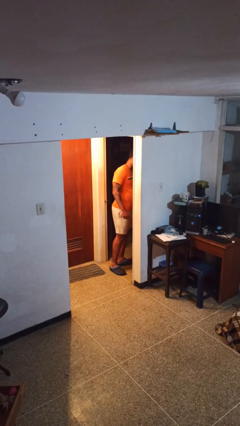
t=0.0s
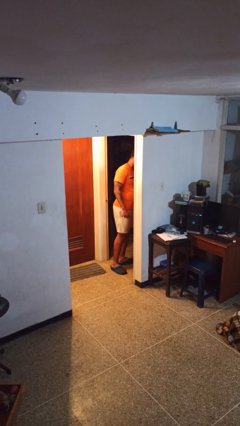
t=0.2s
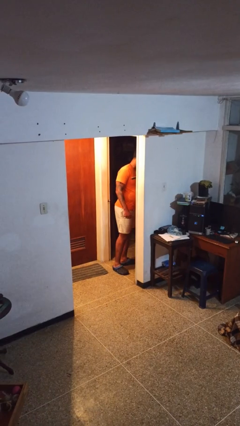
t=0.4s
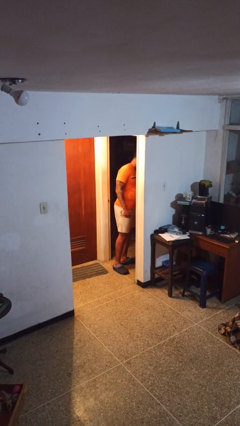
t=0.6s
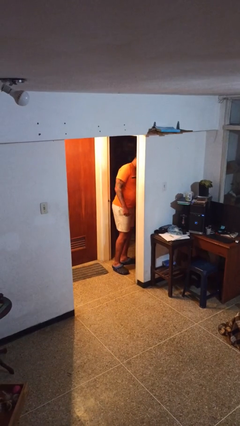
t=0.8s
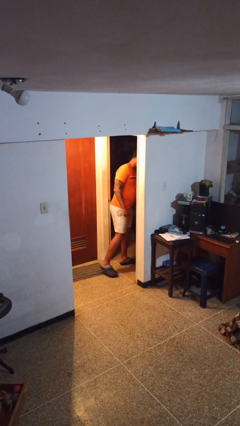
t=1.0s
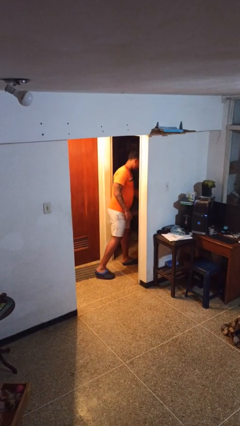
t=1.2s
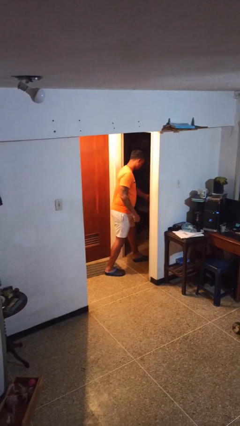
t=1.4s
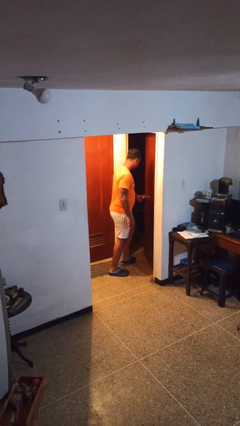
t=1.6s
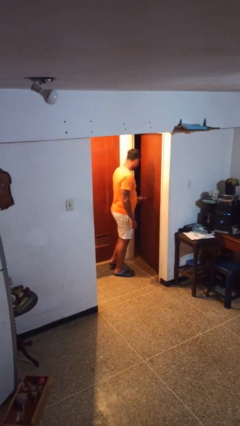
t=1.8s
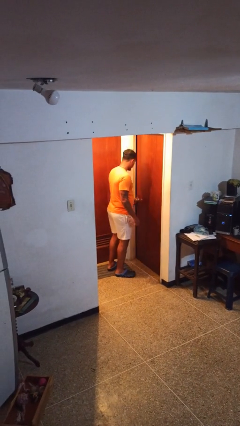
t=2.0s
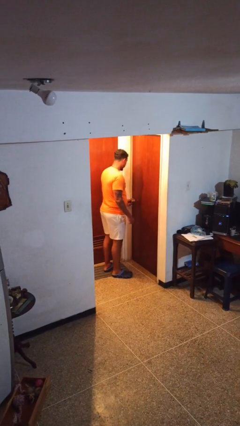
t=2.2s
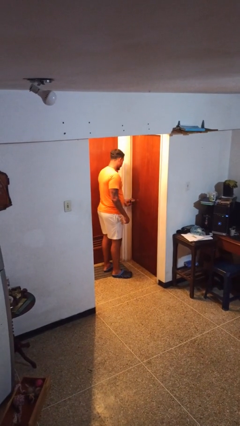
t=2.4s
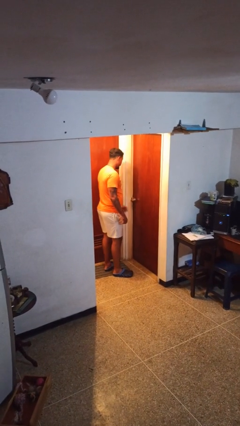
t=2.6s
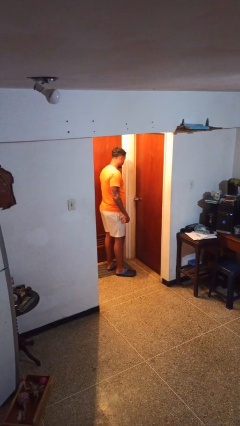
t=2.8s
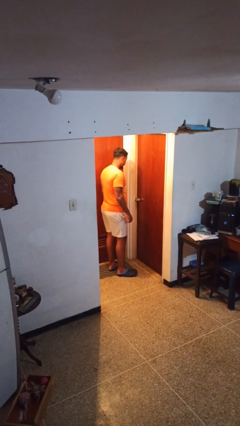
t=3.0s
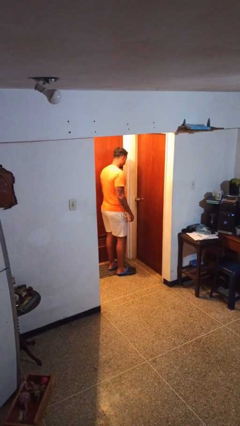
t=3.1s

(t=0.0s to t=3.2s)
person closes facility door

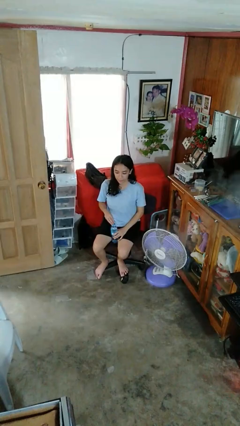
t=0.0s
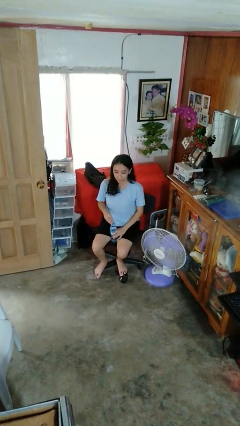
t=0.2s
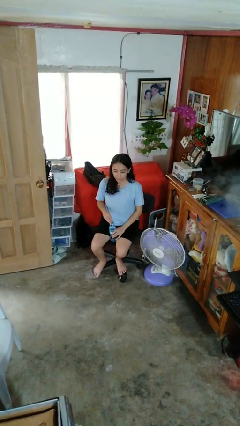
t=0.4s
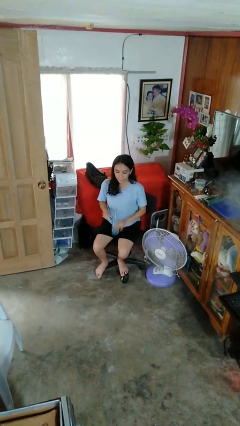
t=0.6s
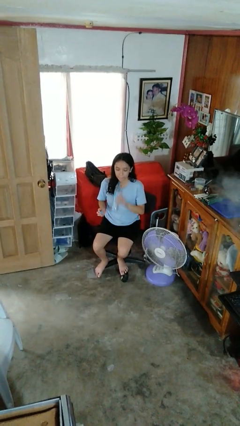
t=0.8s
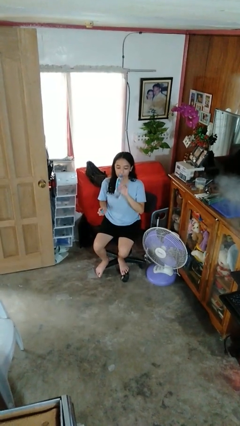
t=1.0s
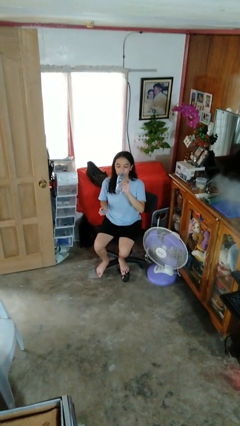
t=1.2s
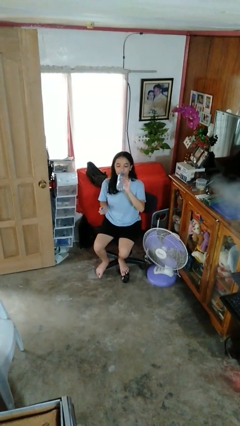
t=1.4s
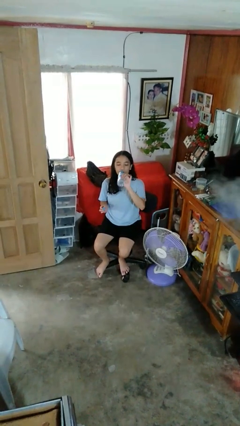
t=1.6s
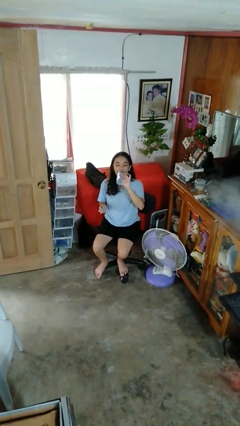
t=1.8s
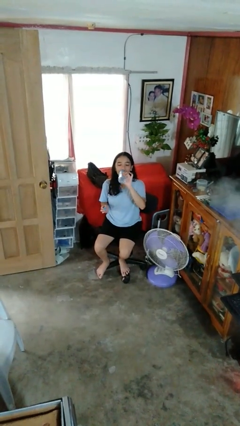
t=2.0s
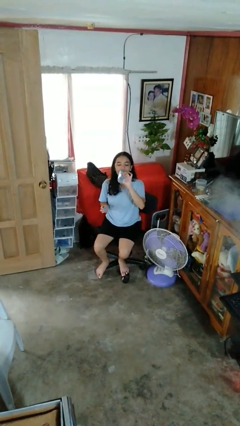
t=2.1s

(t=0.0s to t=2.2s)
person drinks from bottle

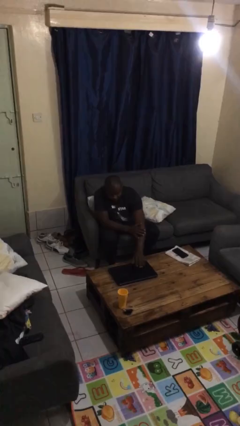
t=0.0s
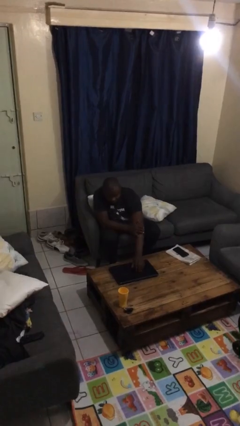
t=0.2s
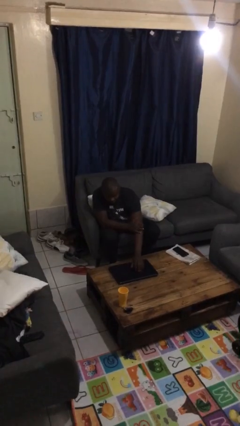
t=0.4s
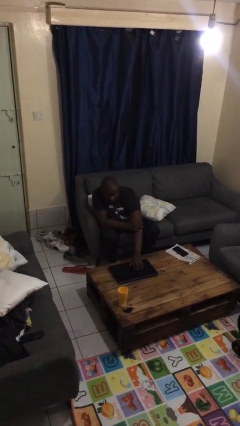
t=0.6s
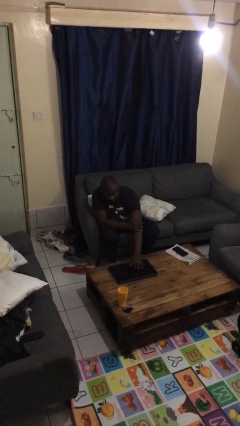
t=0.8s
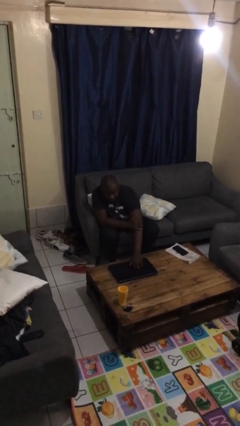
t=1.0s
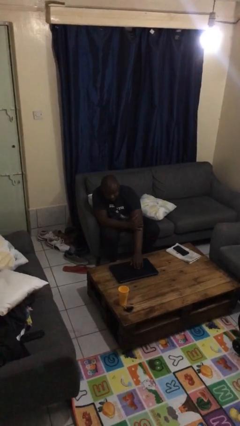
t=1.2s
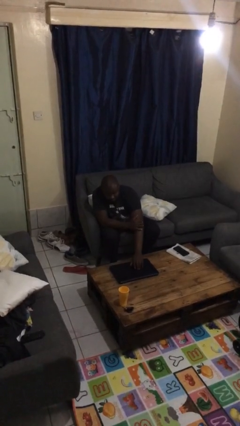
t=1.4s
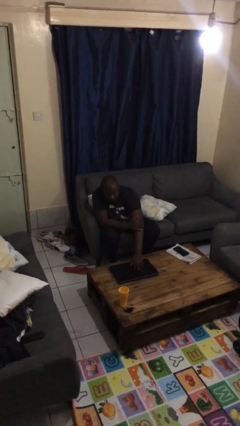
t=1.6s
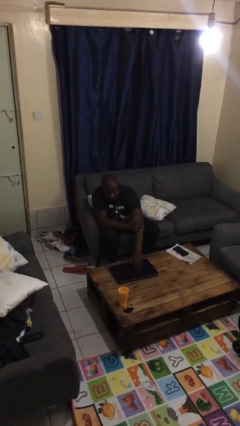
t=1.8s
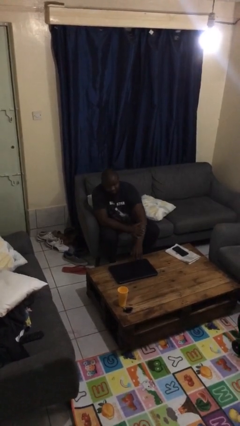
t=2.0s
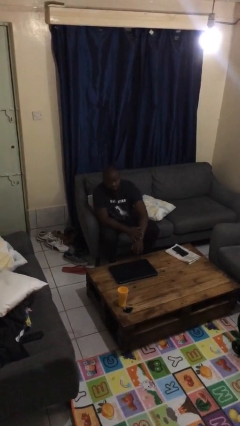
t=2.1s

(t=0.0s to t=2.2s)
person taps object with finger

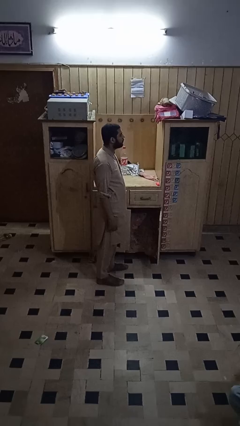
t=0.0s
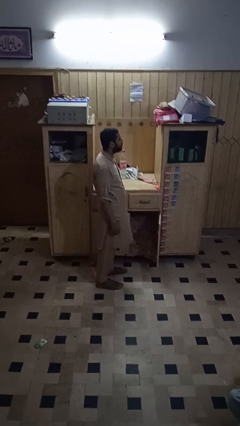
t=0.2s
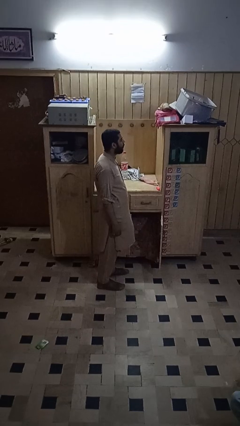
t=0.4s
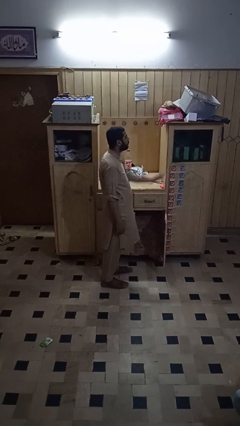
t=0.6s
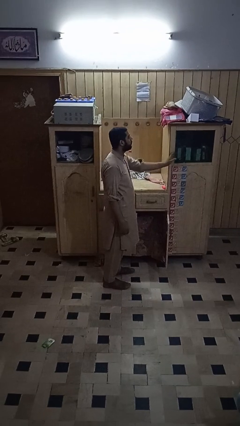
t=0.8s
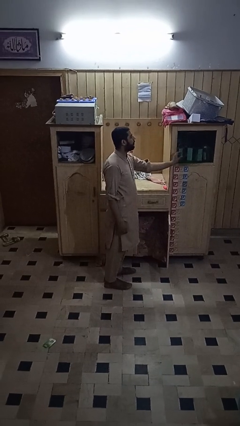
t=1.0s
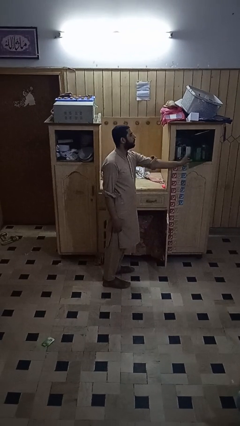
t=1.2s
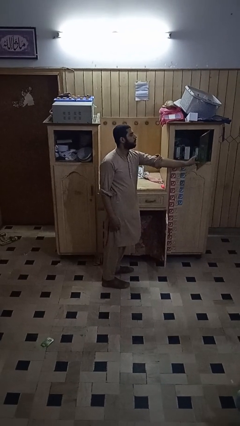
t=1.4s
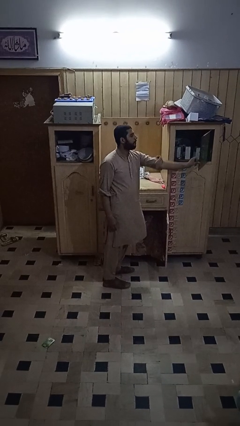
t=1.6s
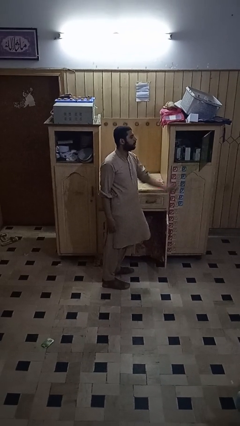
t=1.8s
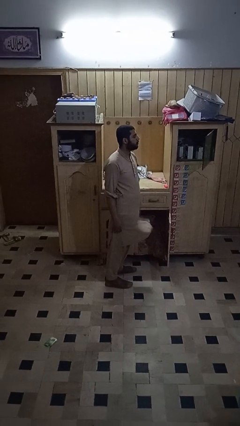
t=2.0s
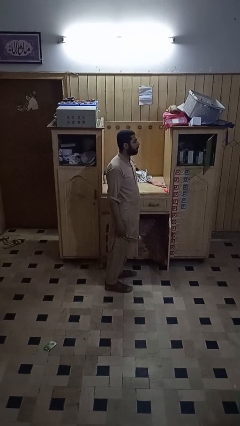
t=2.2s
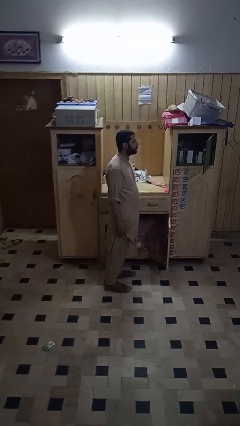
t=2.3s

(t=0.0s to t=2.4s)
person closes cabinet

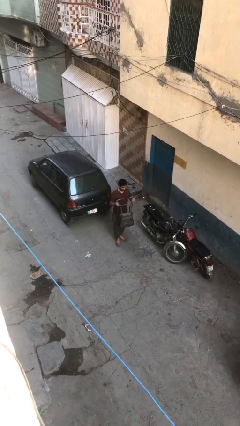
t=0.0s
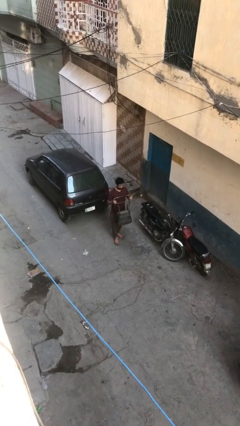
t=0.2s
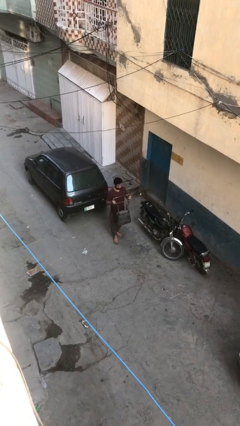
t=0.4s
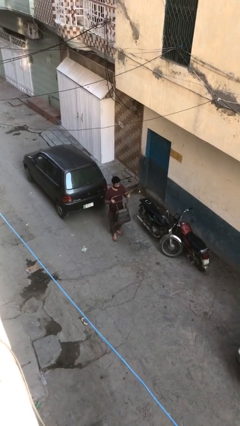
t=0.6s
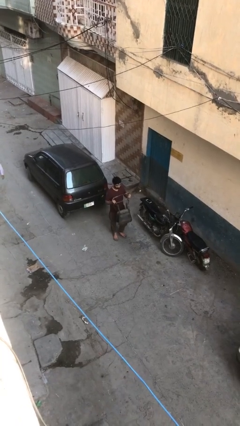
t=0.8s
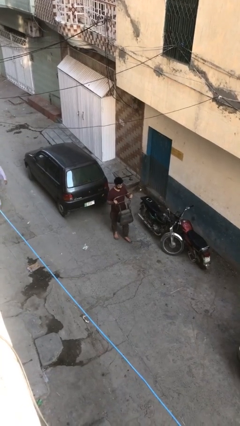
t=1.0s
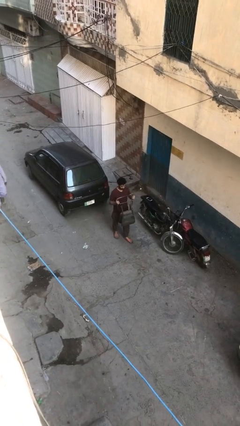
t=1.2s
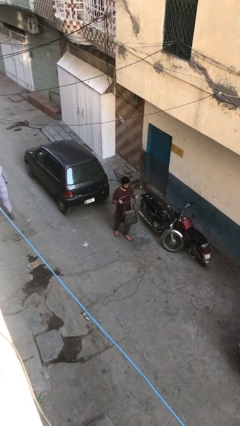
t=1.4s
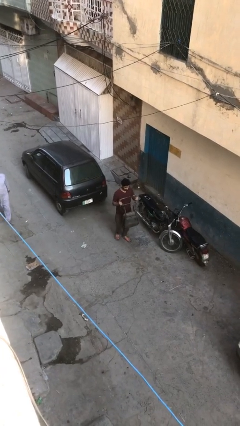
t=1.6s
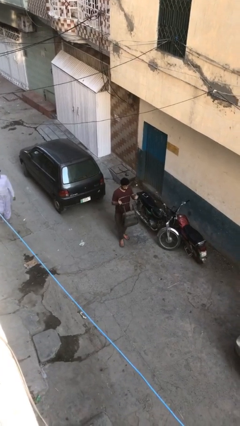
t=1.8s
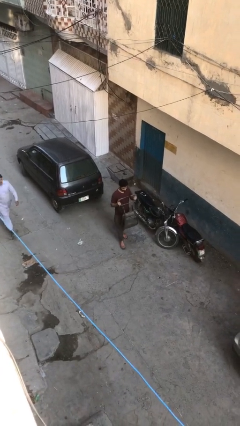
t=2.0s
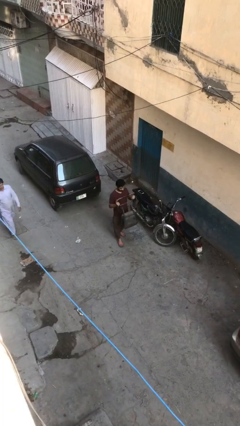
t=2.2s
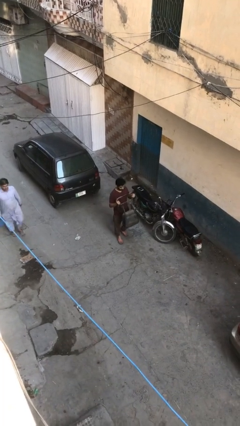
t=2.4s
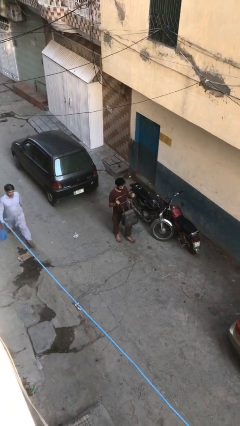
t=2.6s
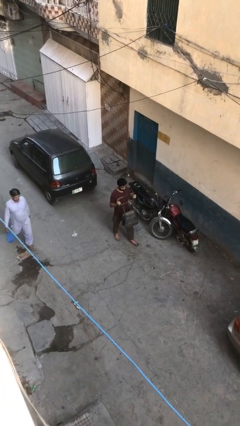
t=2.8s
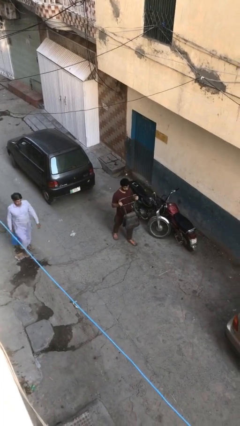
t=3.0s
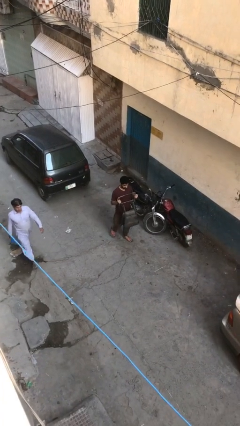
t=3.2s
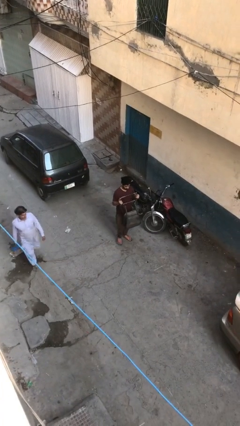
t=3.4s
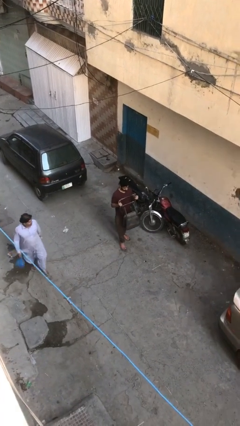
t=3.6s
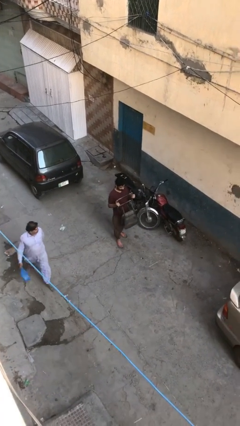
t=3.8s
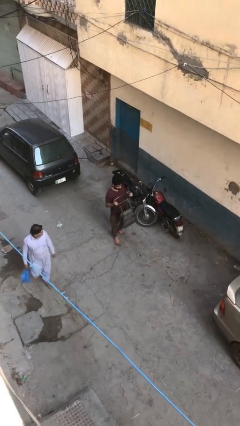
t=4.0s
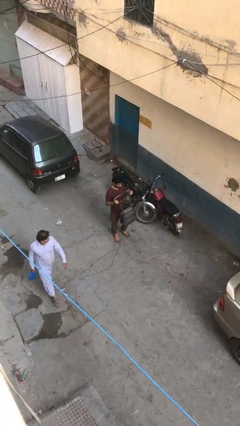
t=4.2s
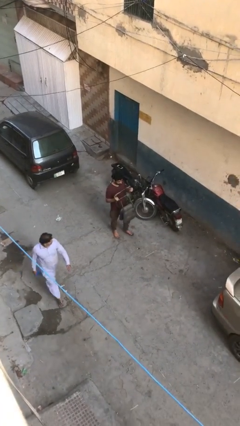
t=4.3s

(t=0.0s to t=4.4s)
person carries heavy object

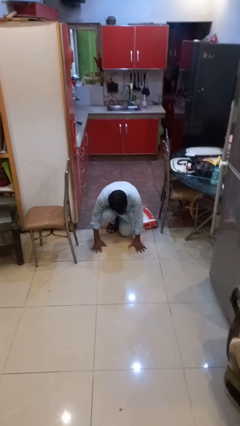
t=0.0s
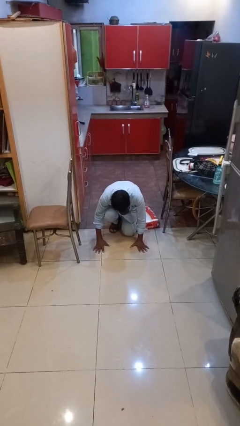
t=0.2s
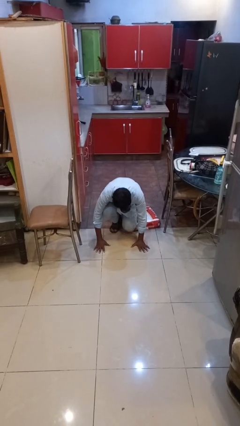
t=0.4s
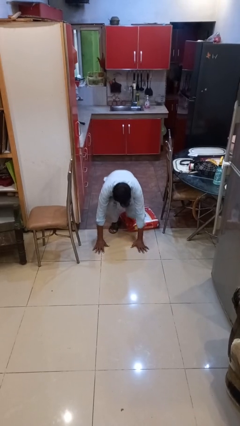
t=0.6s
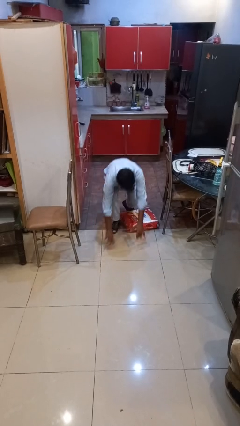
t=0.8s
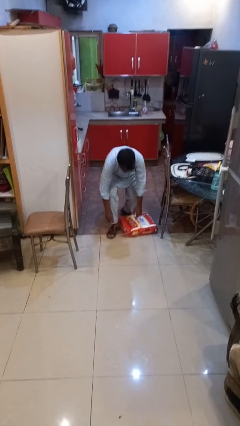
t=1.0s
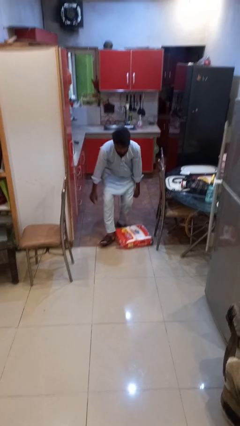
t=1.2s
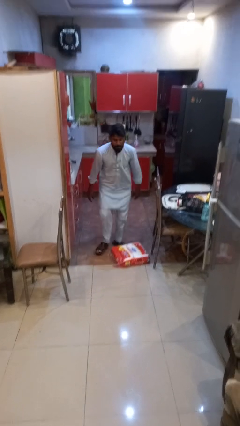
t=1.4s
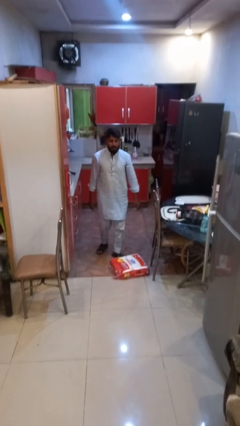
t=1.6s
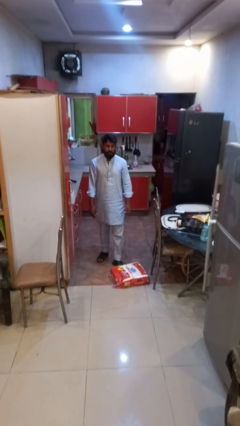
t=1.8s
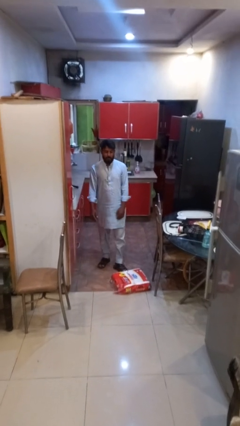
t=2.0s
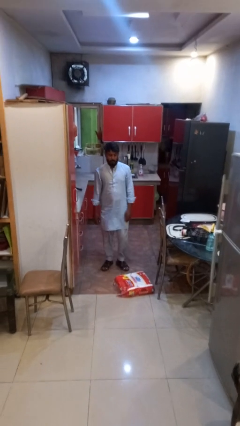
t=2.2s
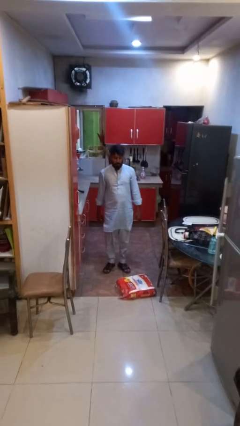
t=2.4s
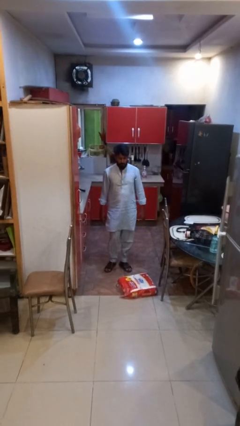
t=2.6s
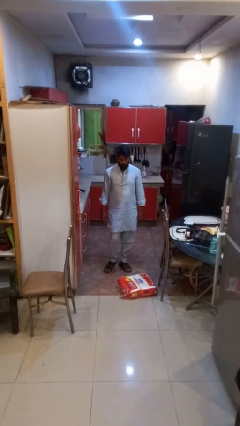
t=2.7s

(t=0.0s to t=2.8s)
person stands up from floor
